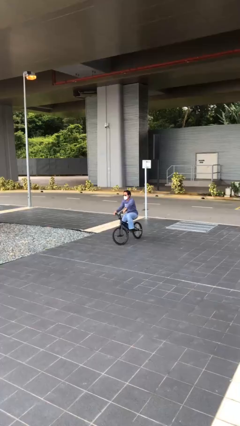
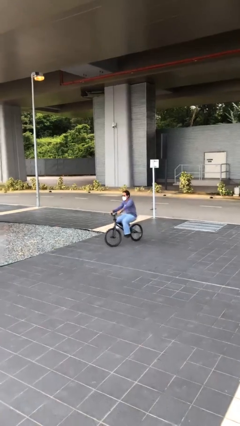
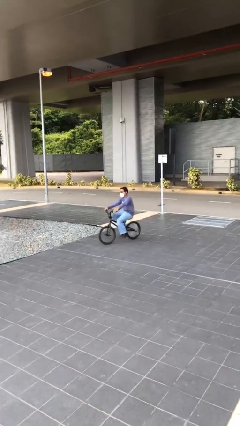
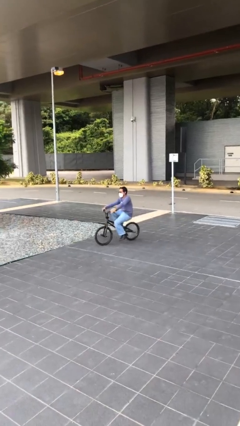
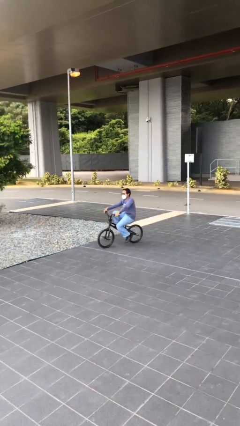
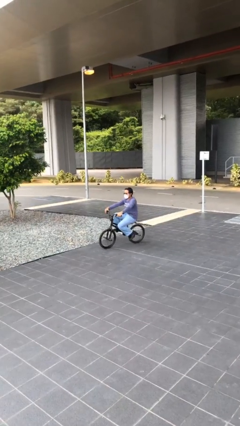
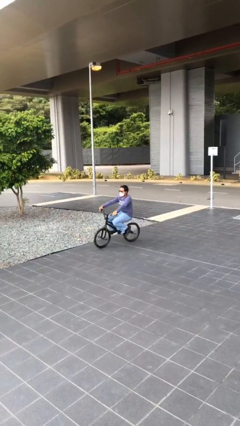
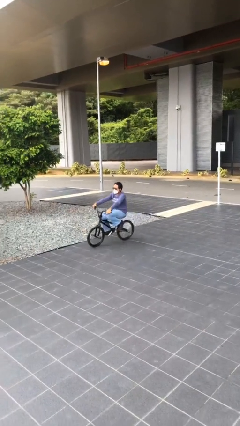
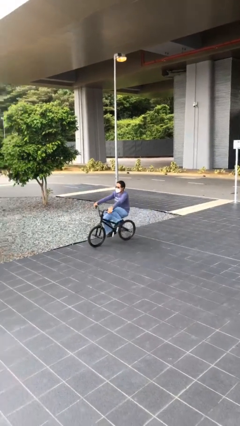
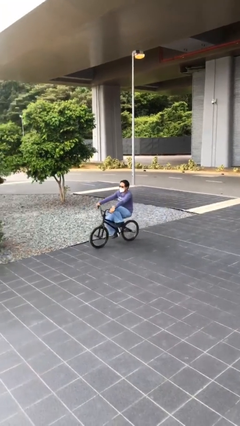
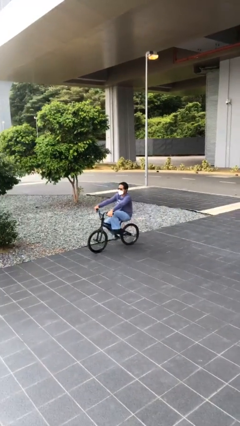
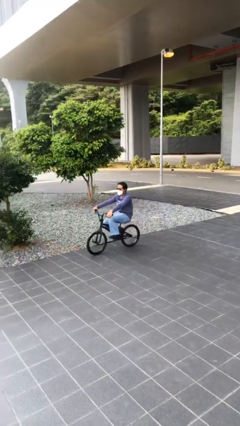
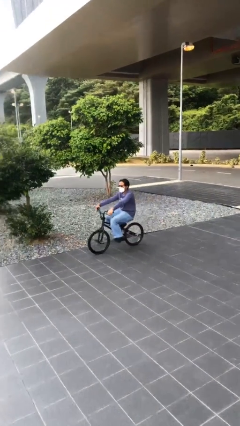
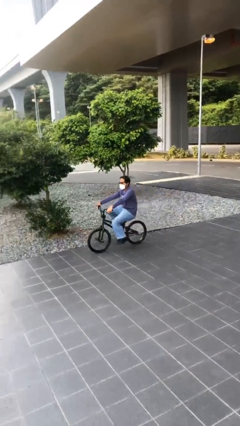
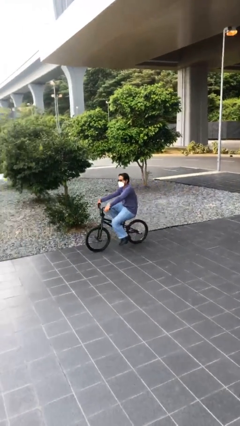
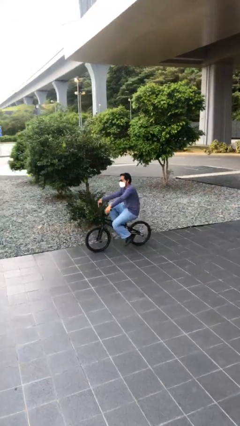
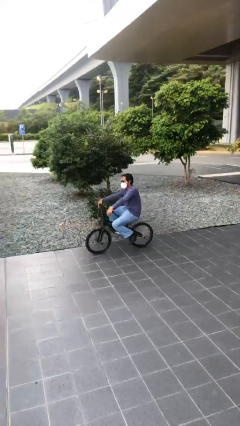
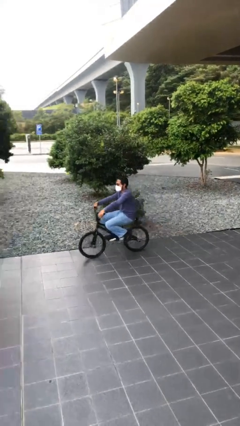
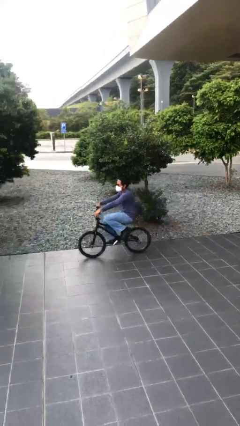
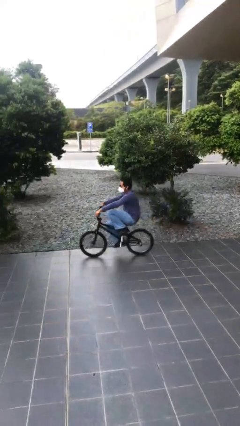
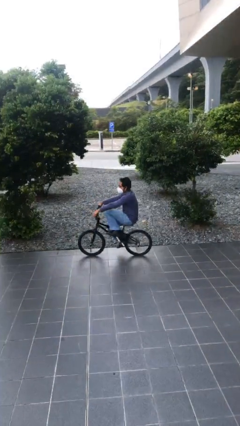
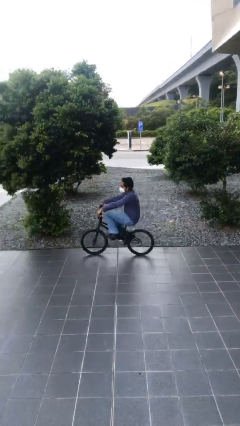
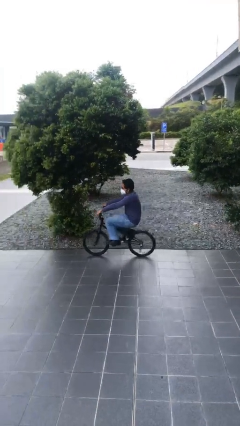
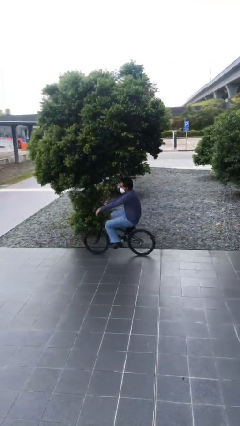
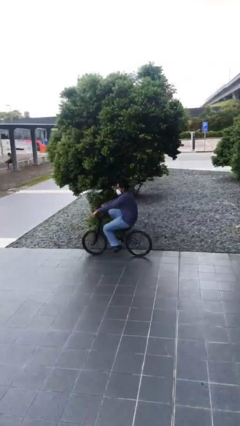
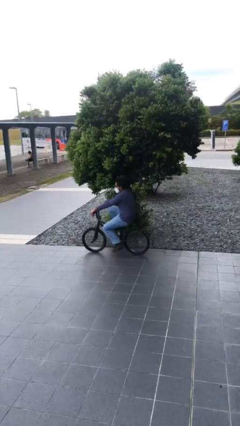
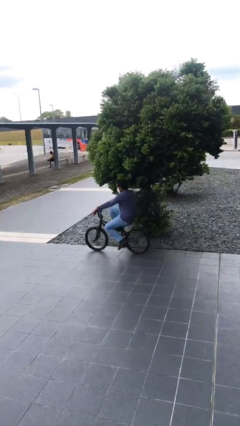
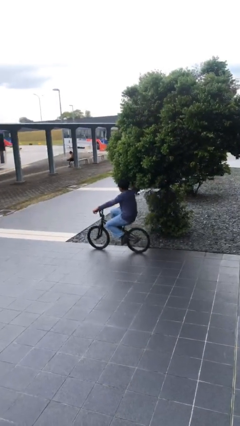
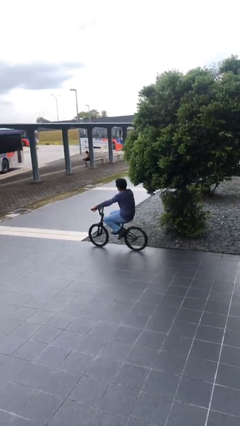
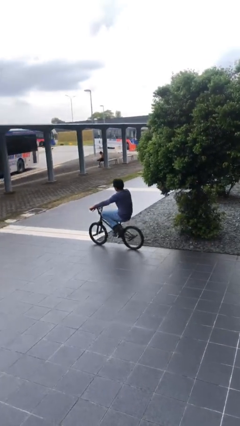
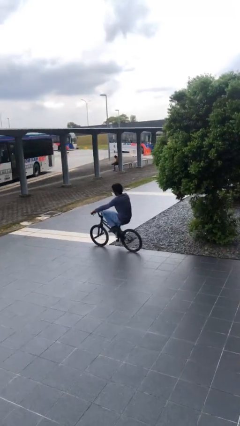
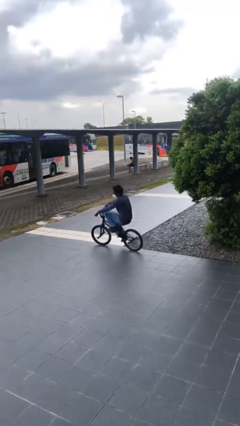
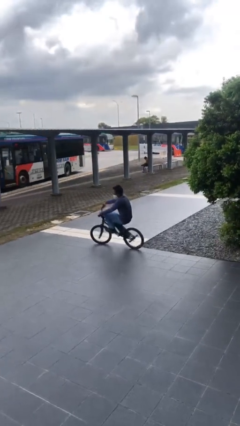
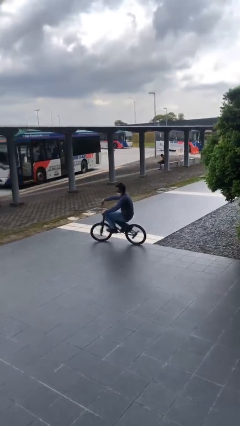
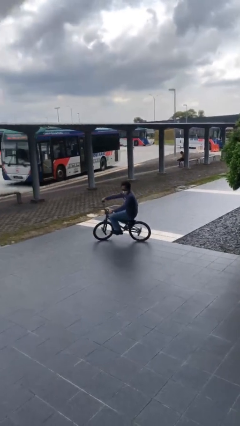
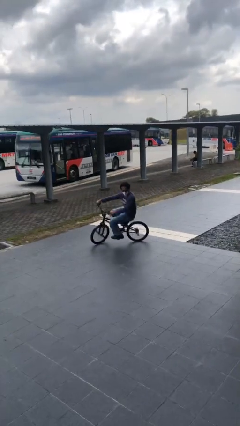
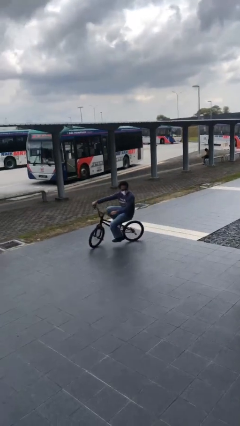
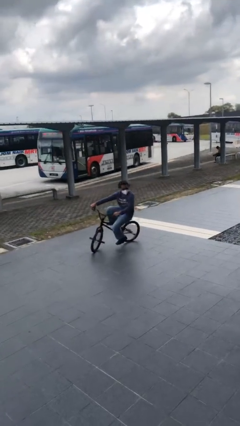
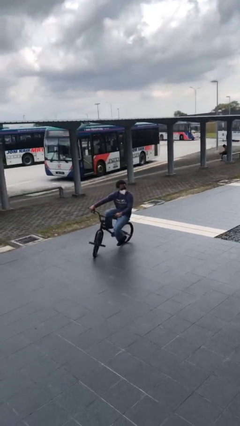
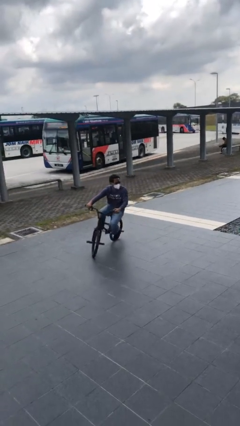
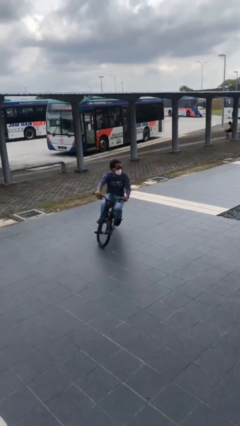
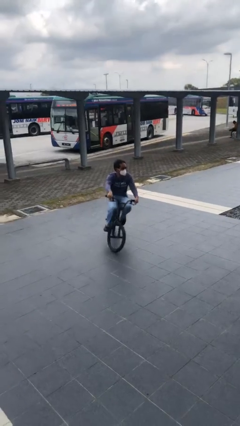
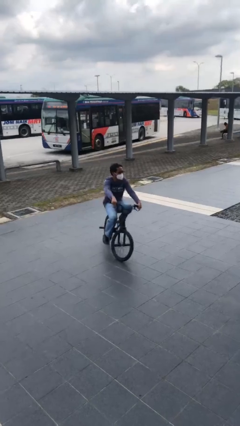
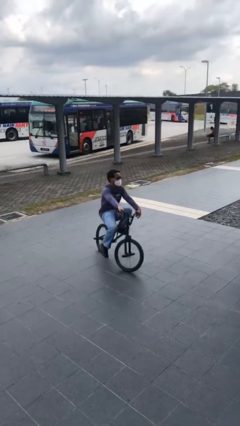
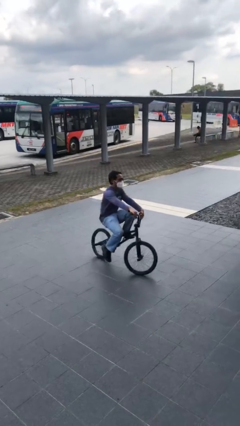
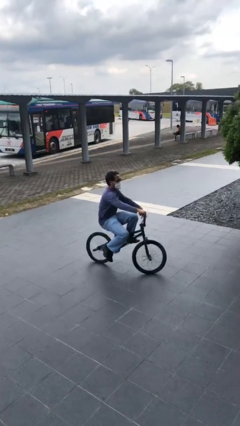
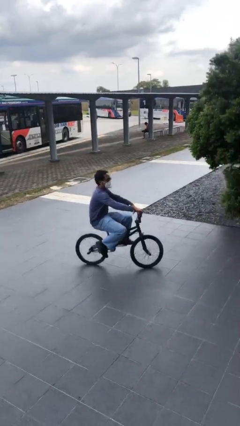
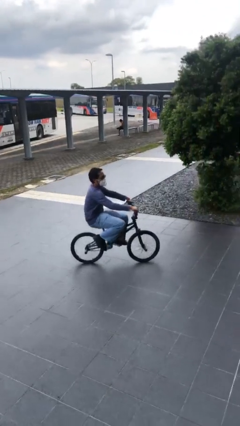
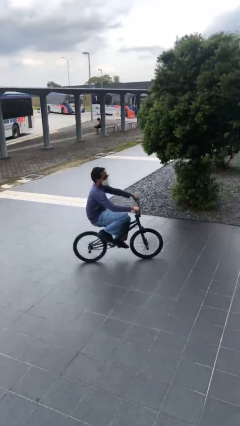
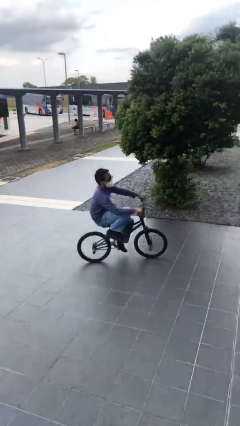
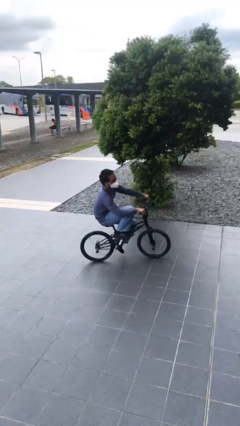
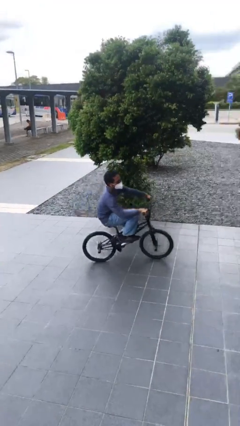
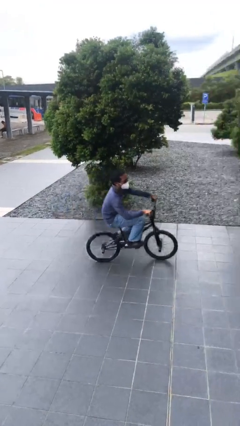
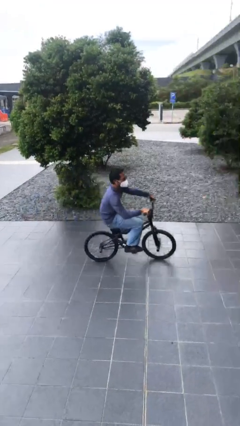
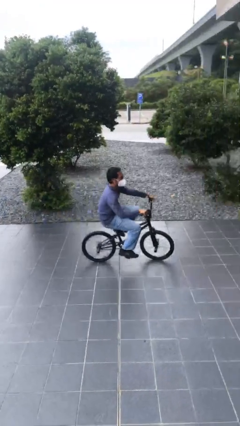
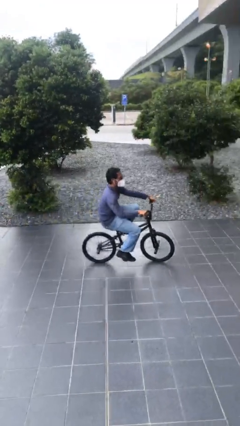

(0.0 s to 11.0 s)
person rides bicycle

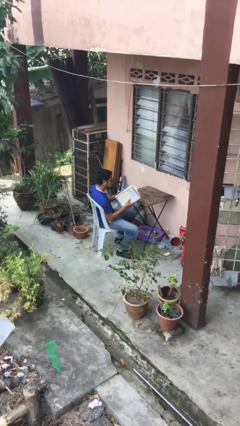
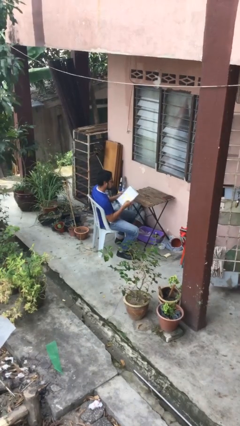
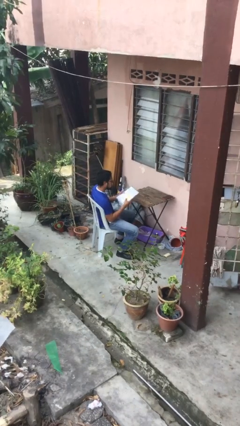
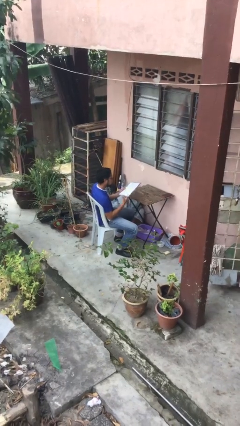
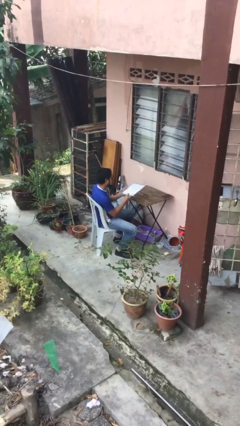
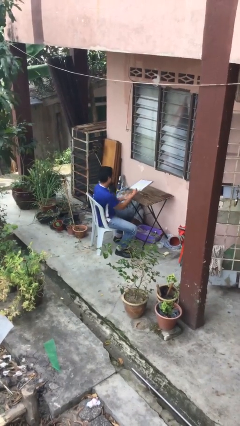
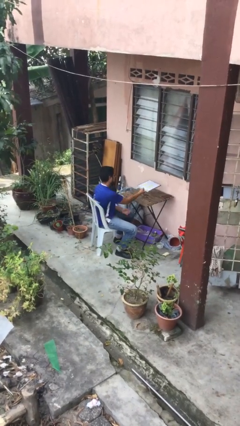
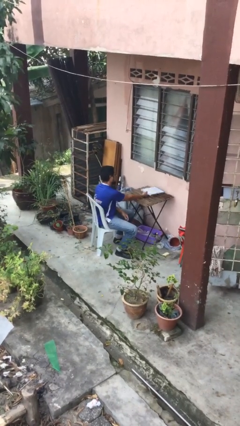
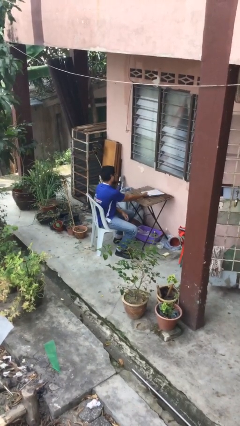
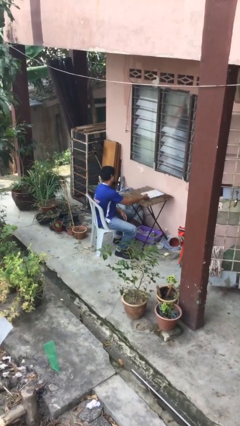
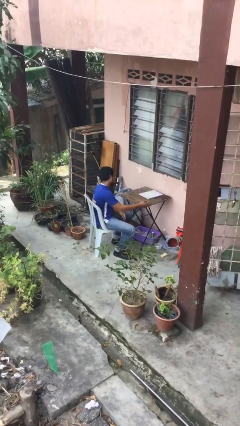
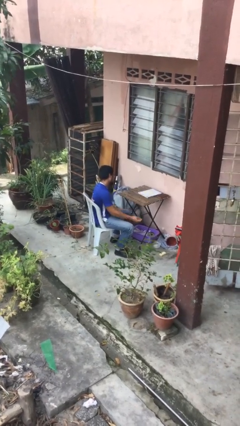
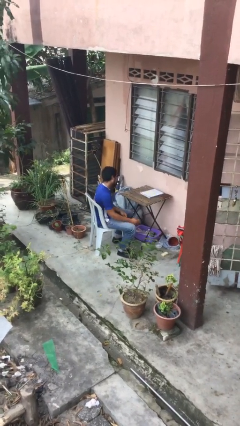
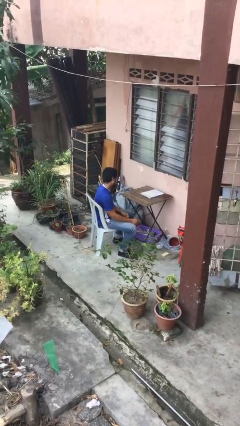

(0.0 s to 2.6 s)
person puts down object on table

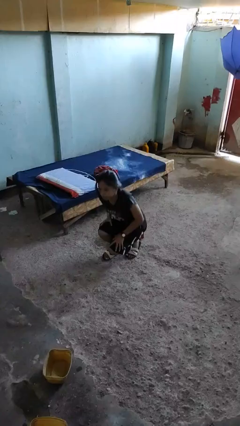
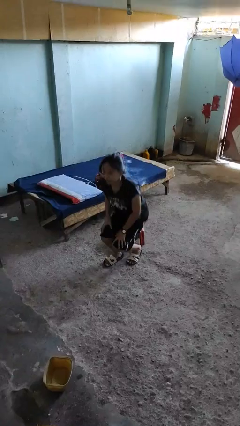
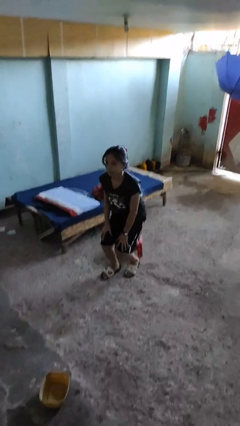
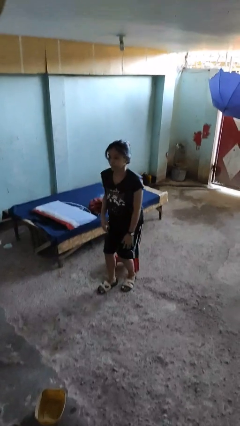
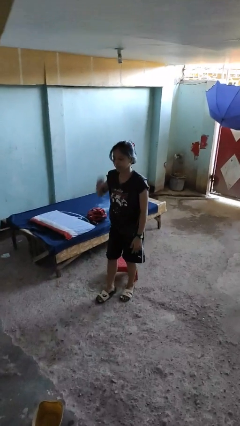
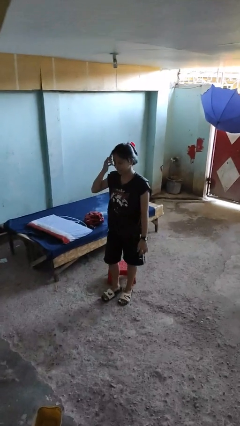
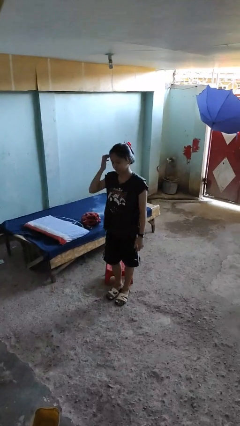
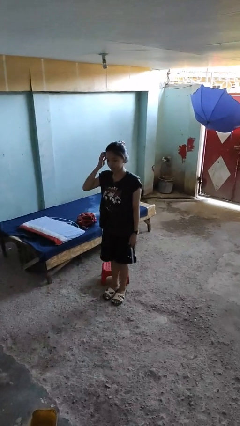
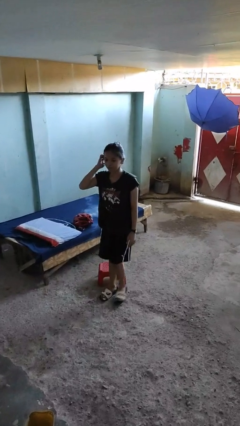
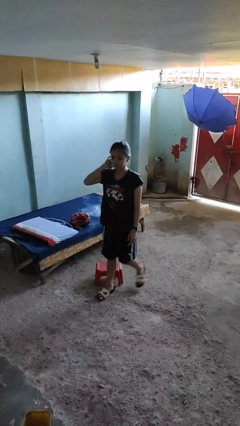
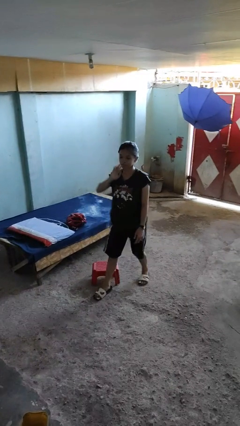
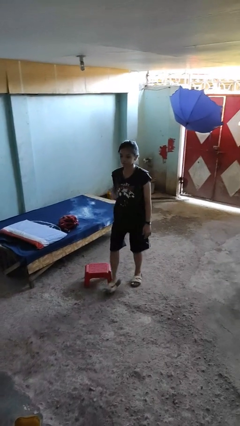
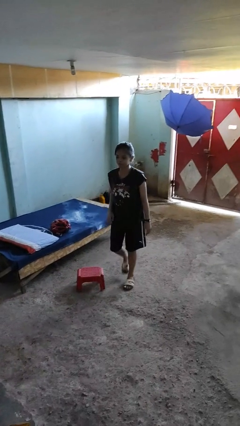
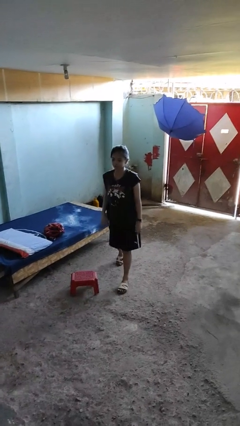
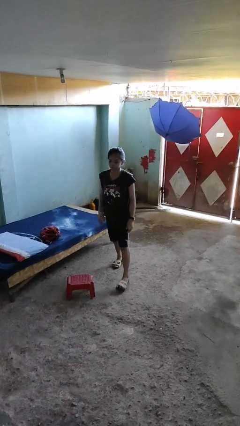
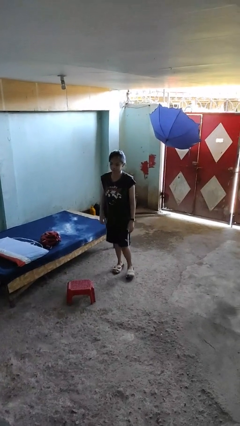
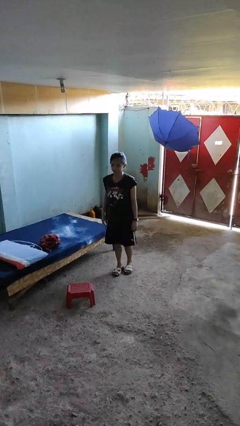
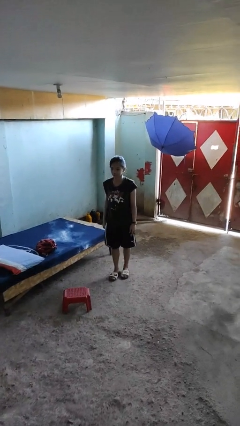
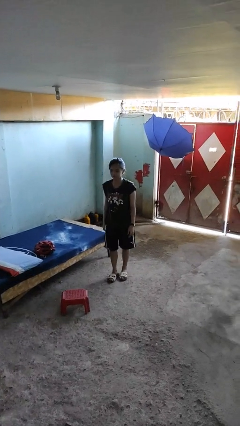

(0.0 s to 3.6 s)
person stands up from floor

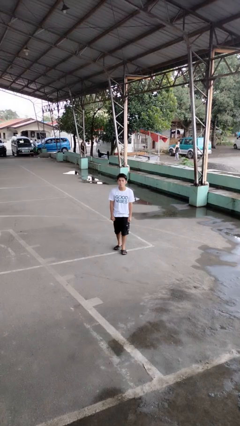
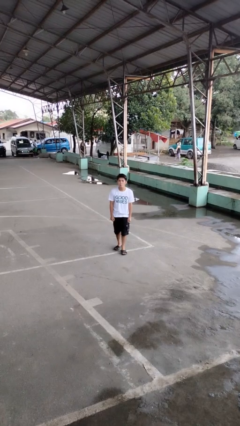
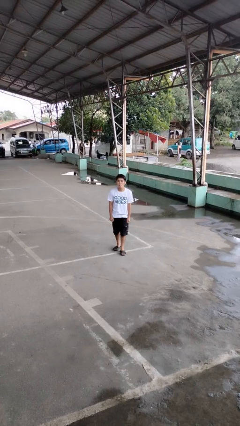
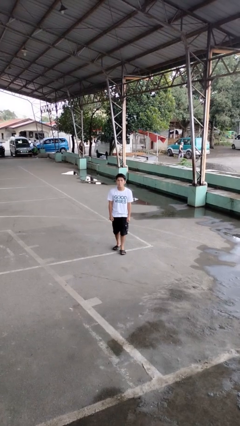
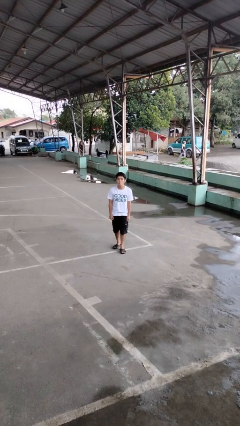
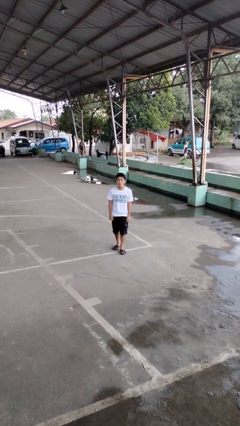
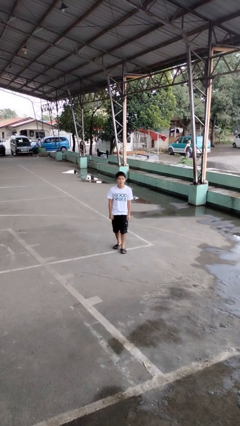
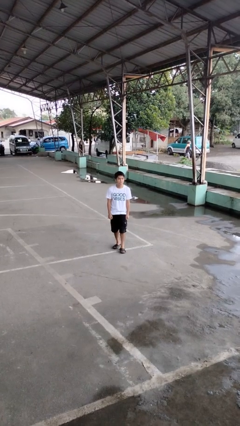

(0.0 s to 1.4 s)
person sticks out tongue
